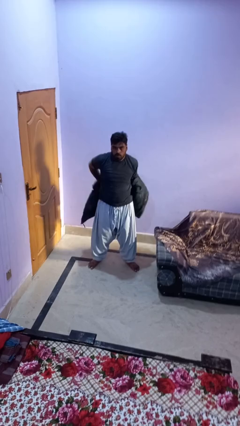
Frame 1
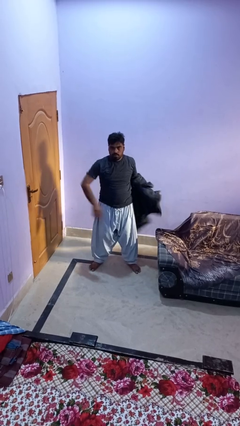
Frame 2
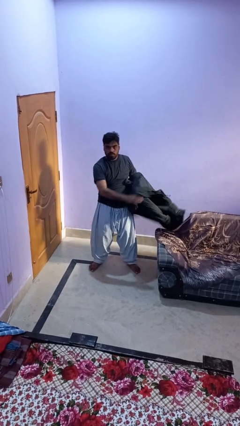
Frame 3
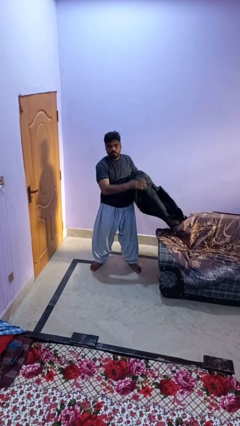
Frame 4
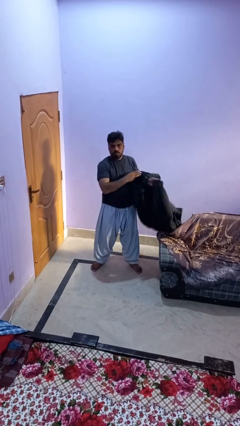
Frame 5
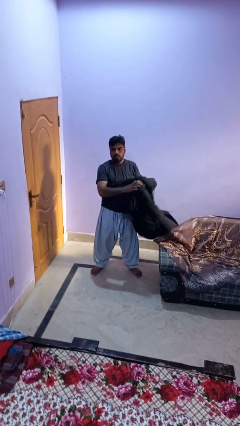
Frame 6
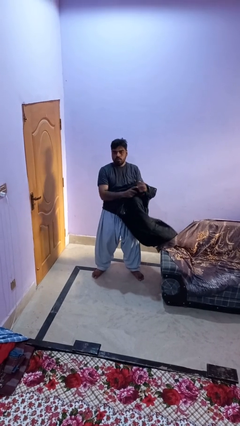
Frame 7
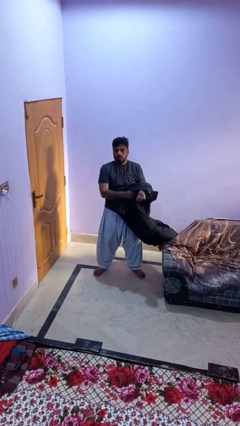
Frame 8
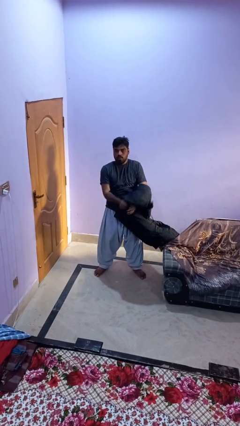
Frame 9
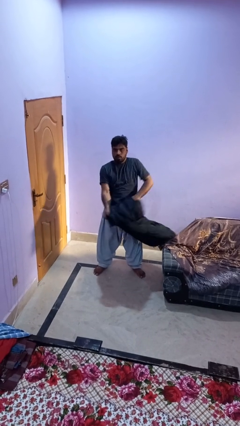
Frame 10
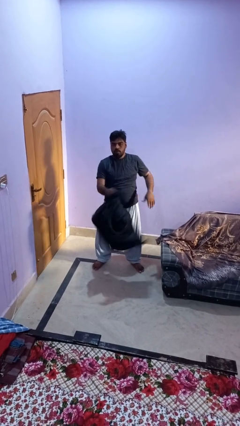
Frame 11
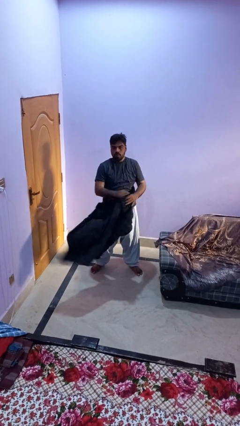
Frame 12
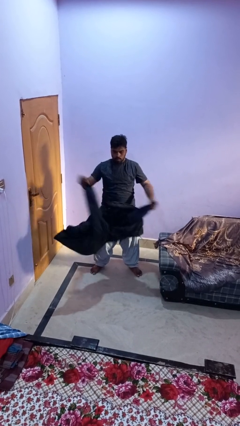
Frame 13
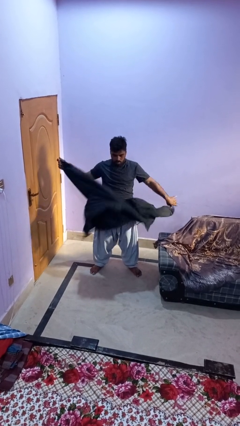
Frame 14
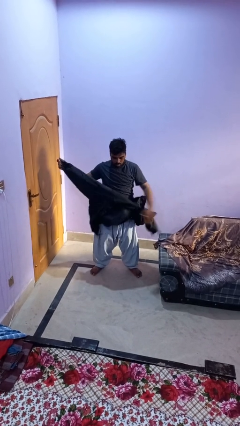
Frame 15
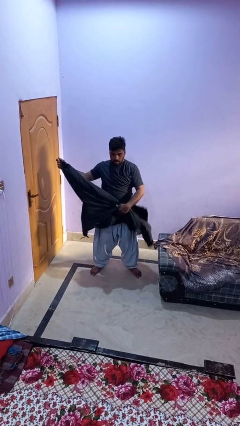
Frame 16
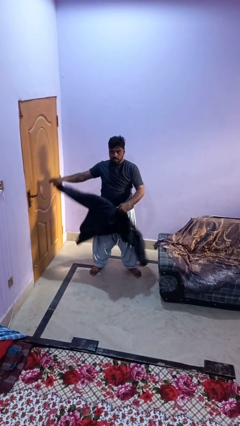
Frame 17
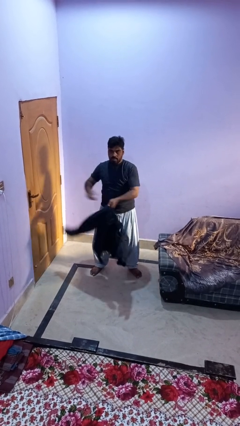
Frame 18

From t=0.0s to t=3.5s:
person takes off jacket

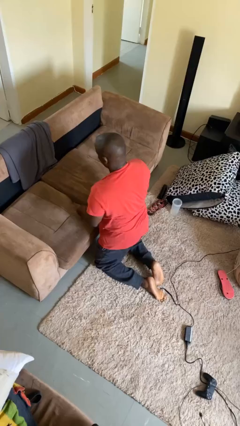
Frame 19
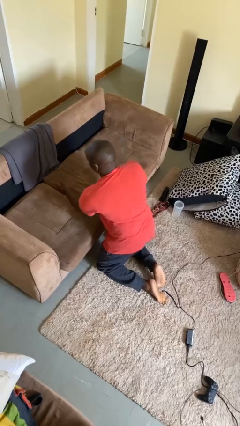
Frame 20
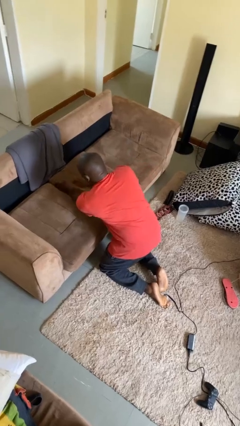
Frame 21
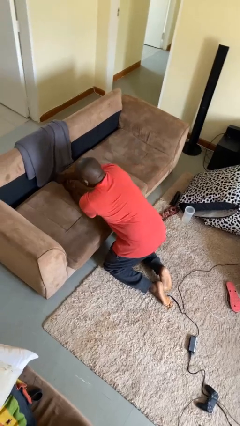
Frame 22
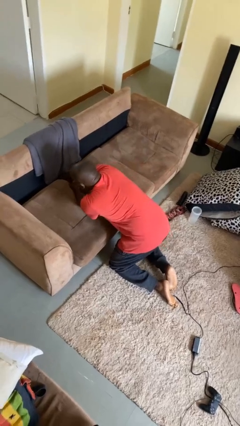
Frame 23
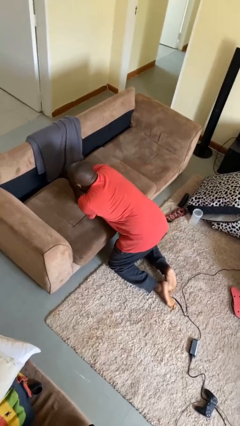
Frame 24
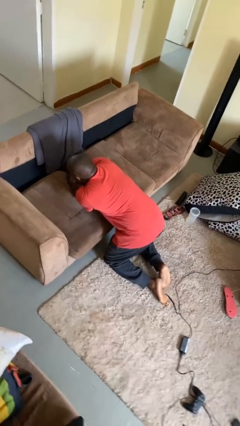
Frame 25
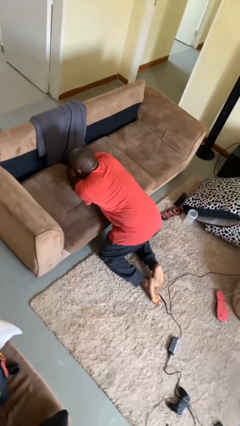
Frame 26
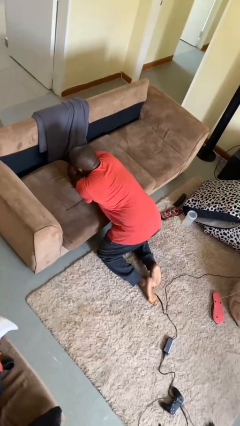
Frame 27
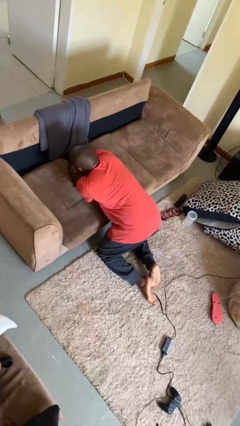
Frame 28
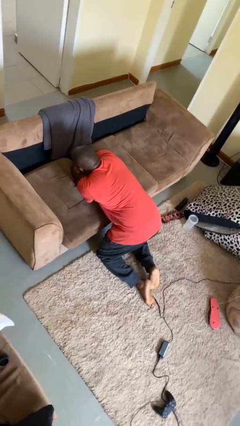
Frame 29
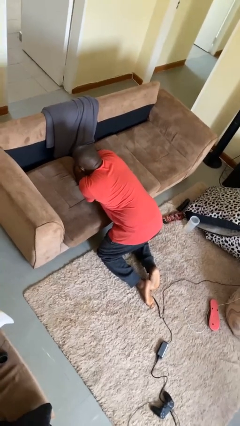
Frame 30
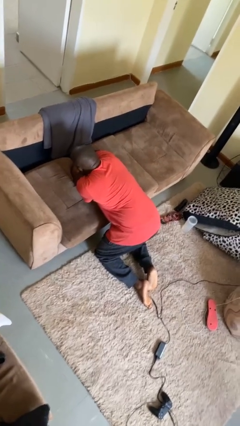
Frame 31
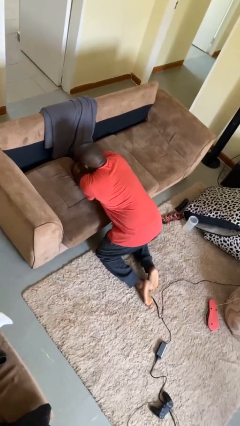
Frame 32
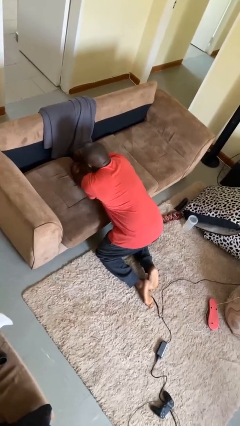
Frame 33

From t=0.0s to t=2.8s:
person searches in couch

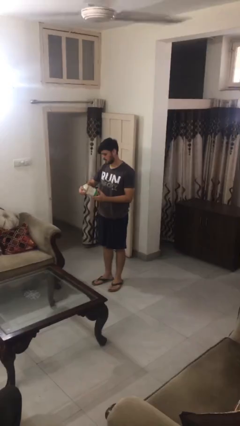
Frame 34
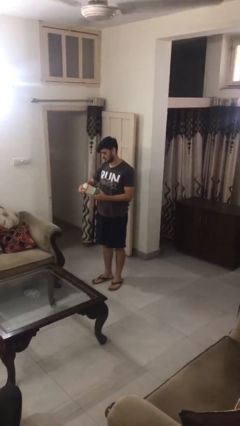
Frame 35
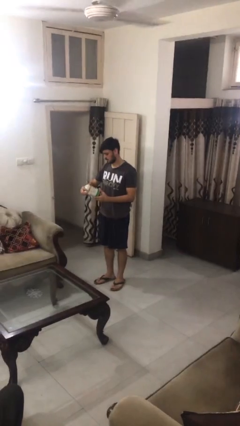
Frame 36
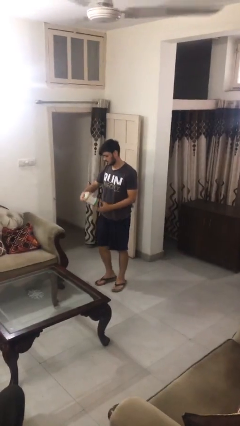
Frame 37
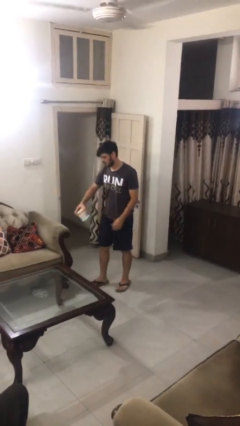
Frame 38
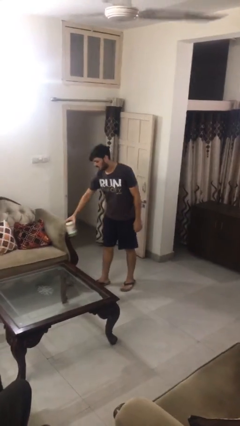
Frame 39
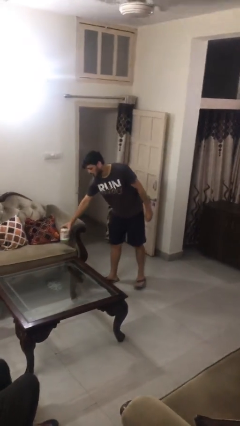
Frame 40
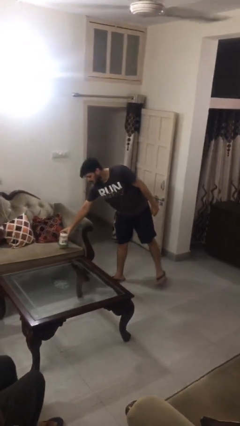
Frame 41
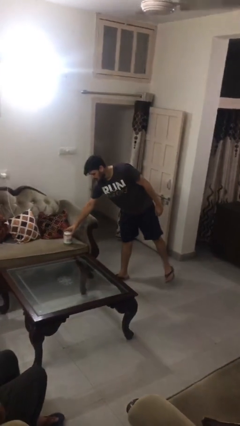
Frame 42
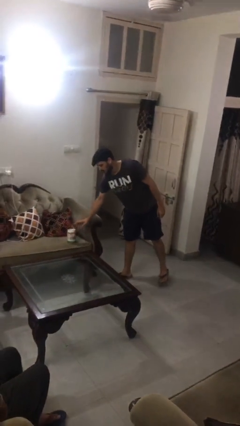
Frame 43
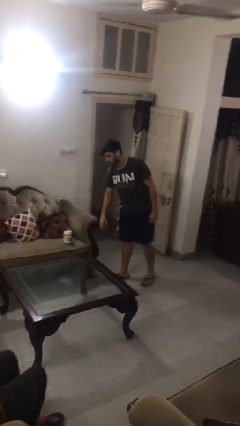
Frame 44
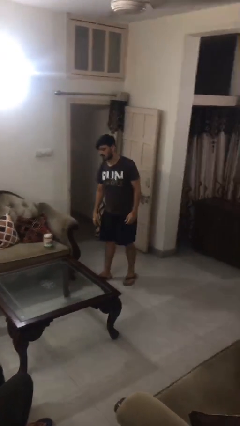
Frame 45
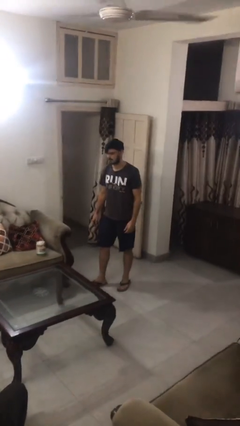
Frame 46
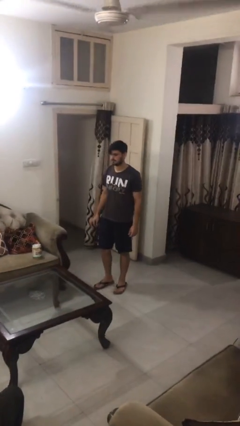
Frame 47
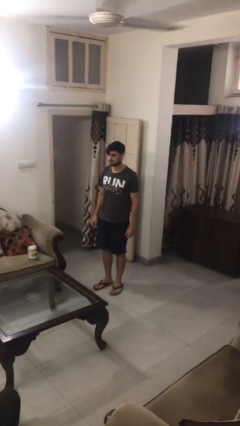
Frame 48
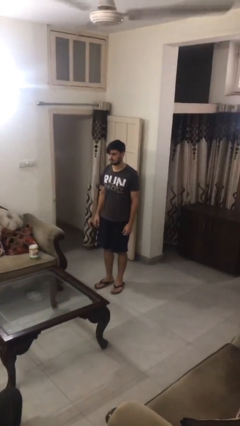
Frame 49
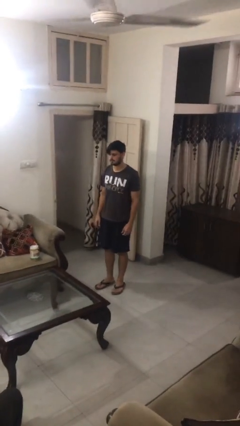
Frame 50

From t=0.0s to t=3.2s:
person puts down object on couch

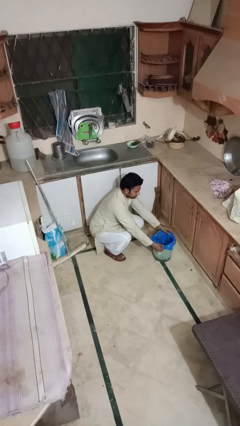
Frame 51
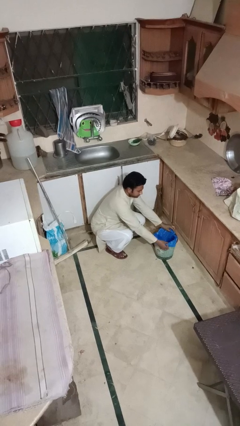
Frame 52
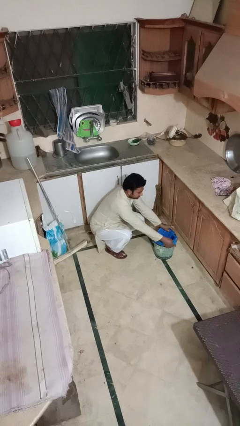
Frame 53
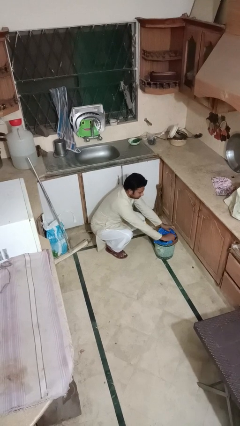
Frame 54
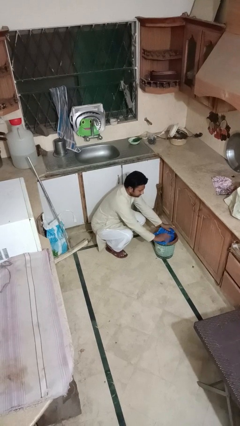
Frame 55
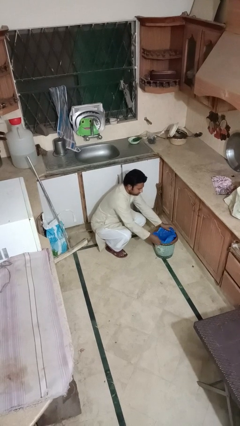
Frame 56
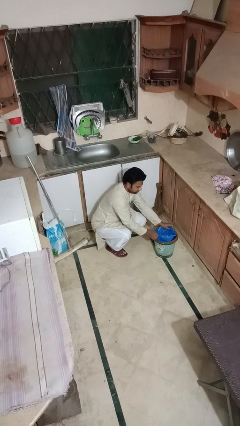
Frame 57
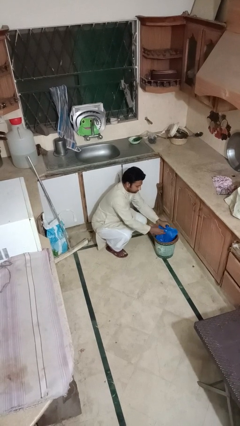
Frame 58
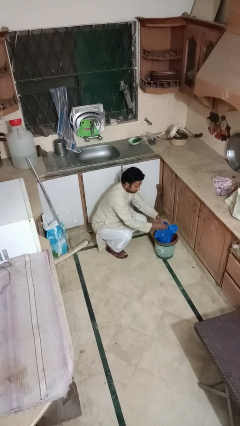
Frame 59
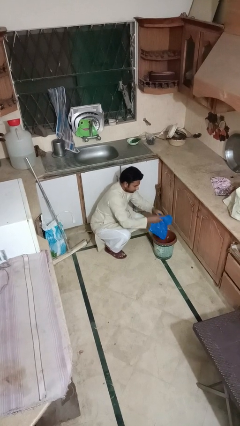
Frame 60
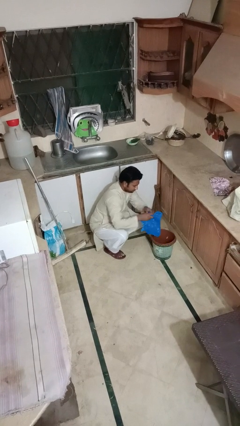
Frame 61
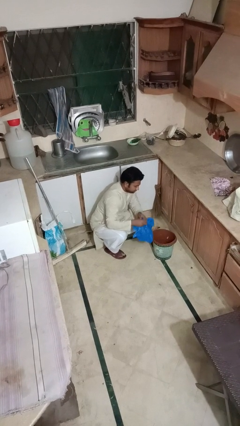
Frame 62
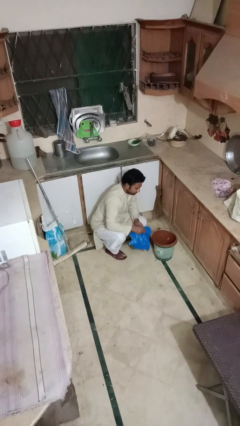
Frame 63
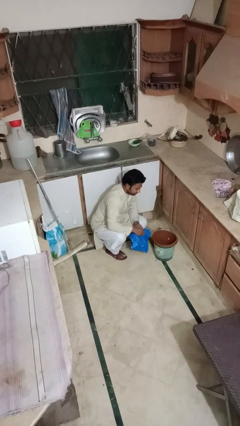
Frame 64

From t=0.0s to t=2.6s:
person removes trashbag from trashcan

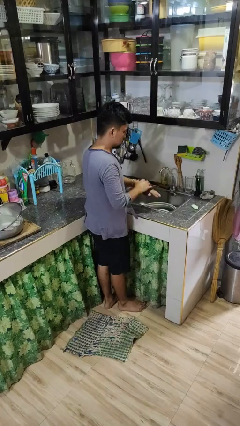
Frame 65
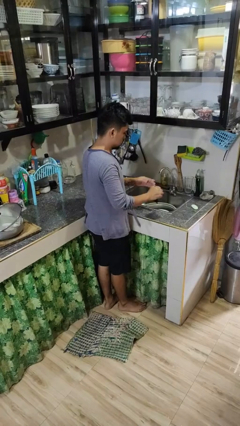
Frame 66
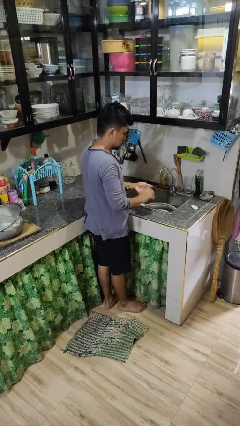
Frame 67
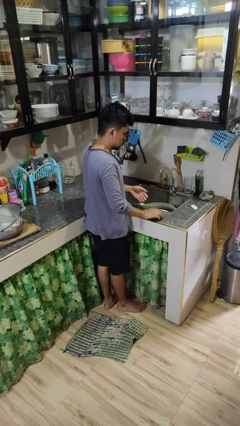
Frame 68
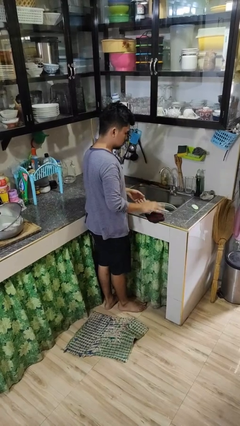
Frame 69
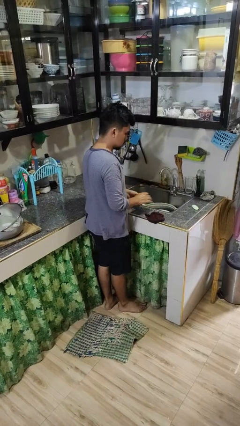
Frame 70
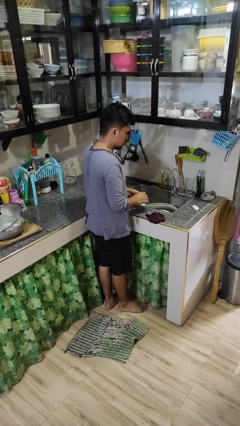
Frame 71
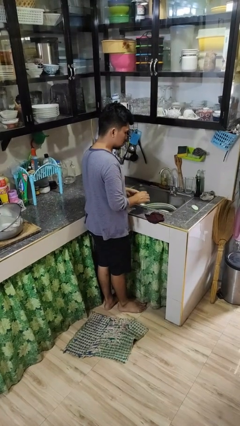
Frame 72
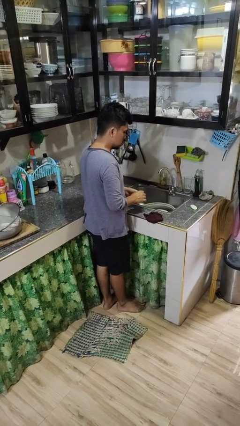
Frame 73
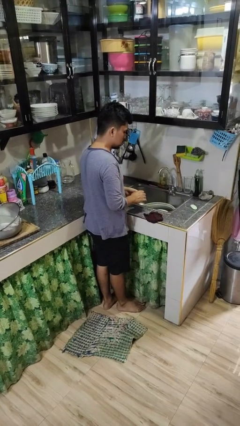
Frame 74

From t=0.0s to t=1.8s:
person dries hands with towel

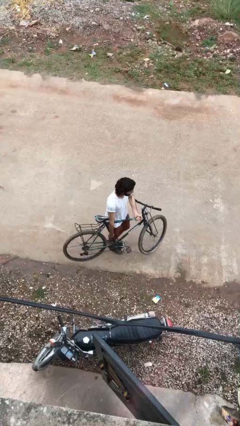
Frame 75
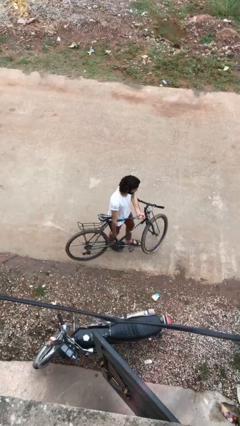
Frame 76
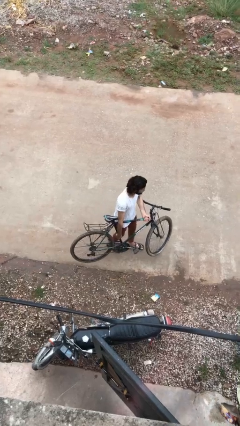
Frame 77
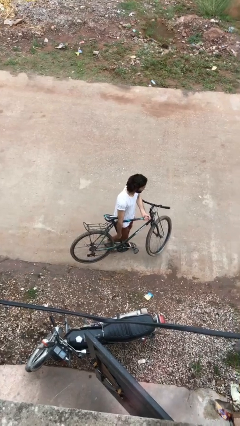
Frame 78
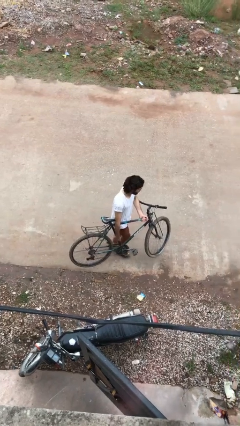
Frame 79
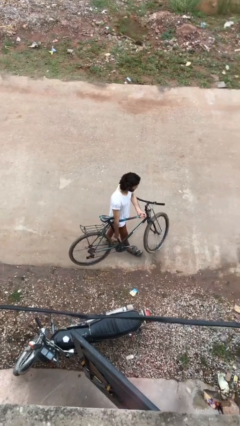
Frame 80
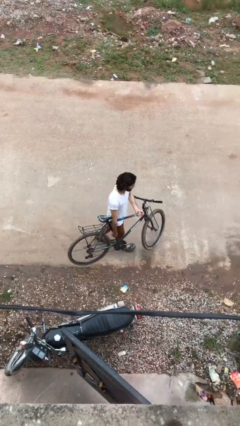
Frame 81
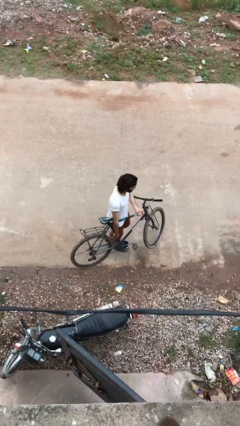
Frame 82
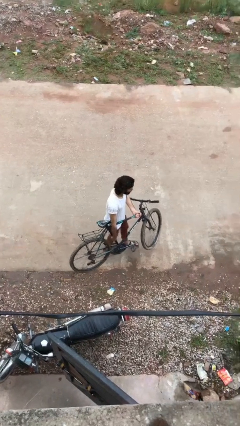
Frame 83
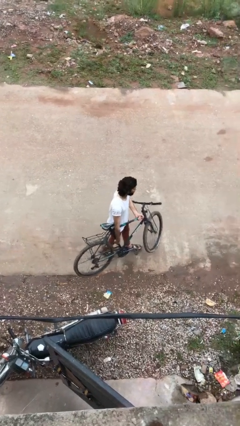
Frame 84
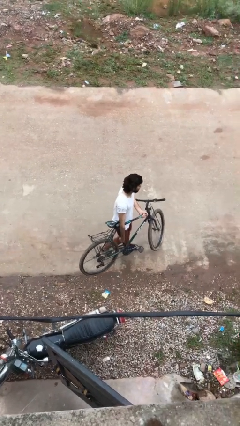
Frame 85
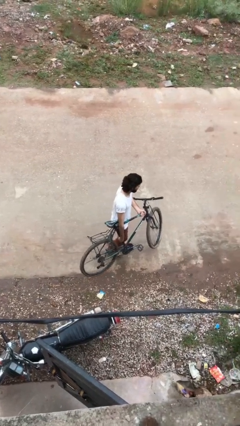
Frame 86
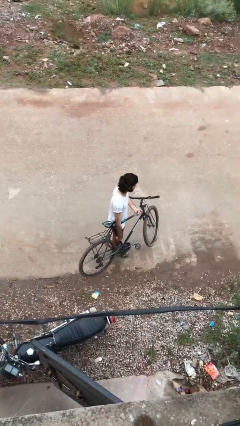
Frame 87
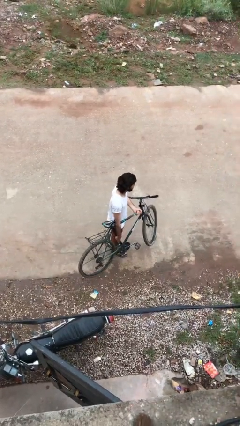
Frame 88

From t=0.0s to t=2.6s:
person carries bicycle

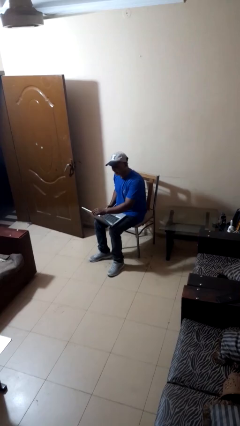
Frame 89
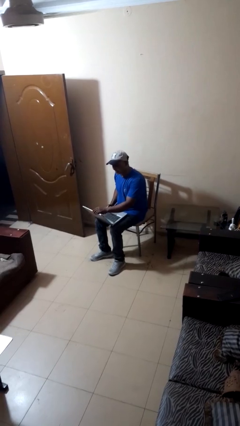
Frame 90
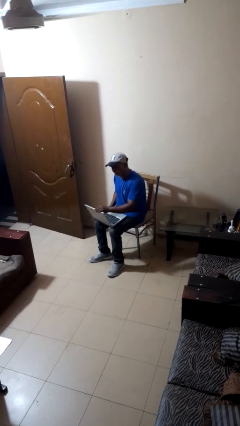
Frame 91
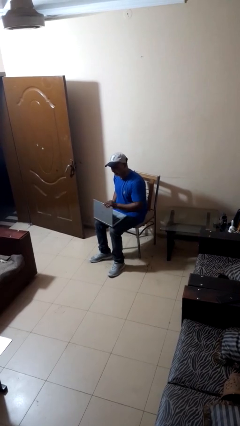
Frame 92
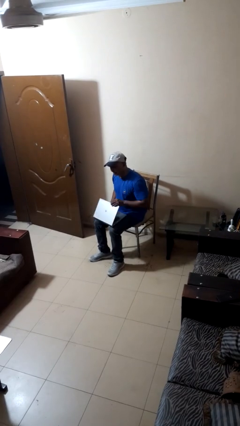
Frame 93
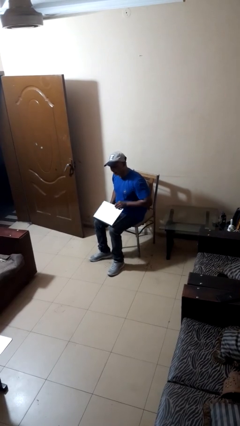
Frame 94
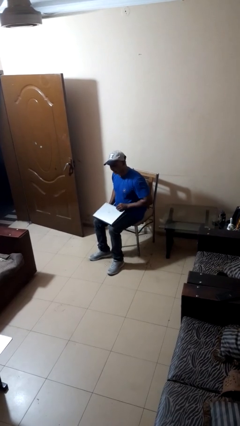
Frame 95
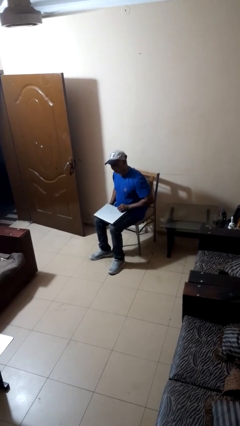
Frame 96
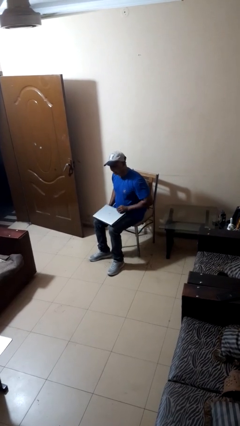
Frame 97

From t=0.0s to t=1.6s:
person closes laptop
